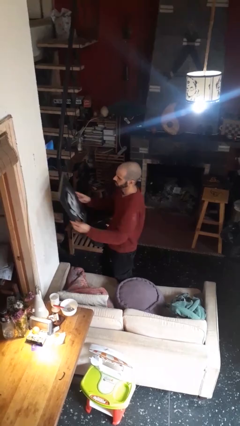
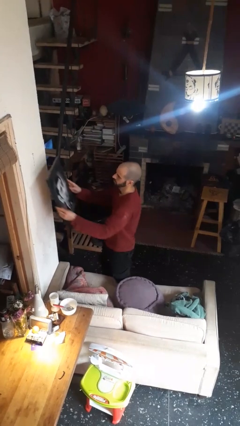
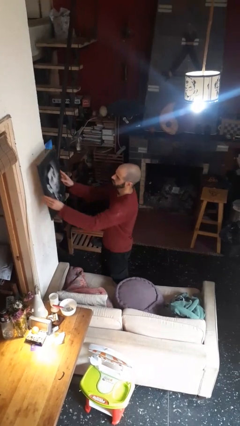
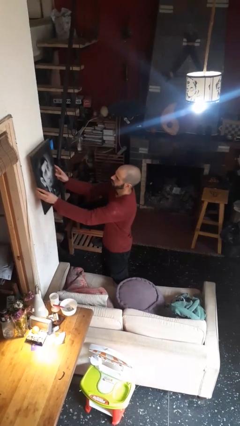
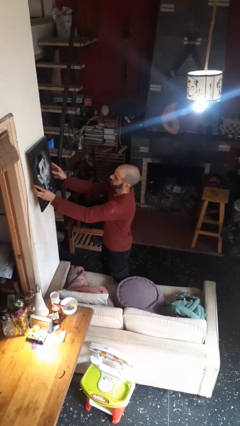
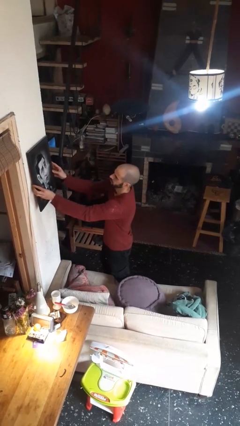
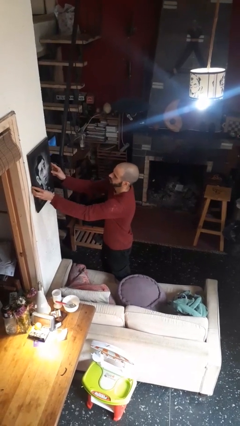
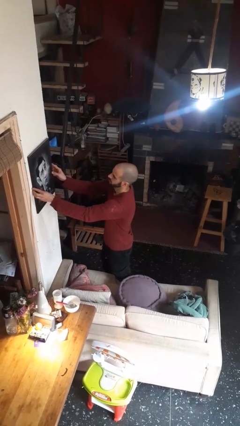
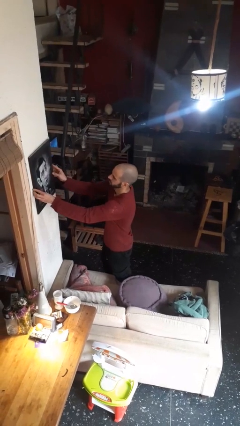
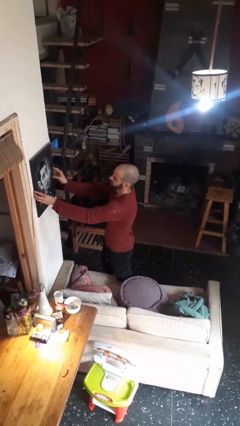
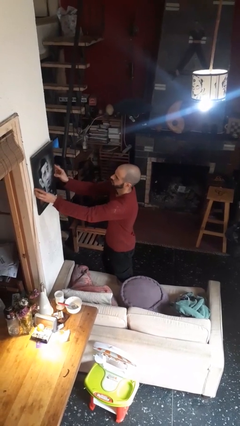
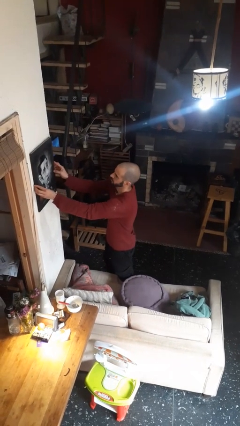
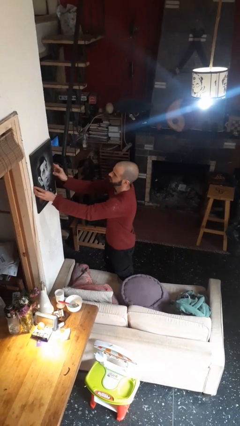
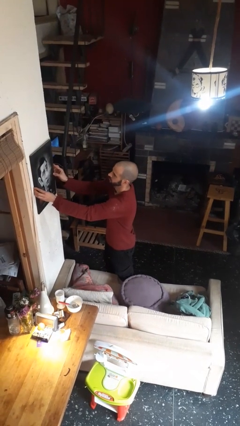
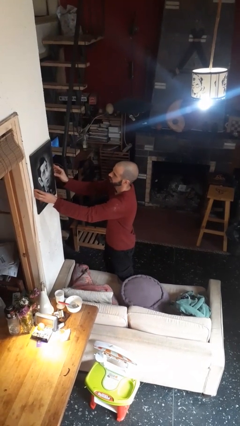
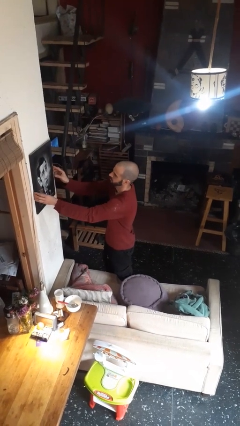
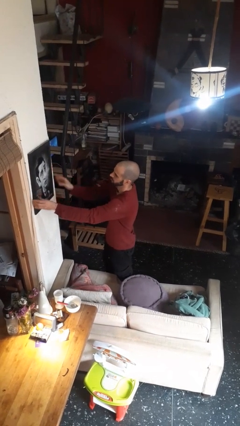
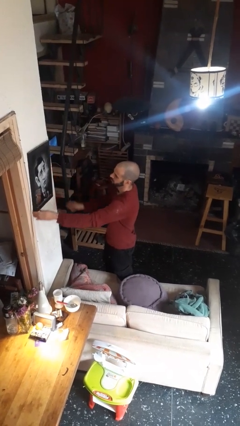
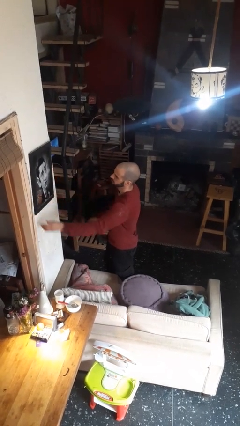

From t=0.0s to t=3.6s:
person puts up picture frame

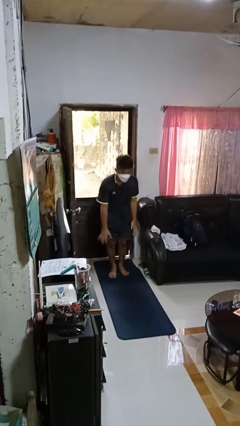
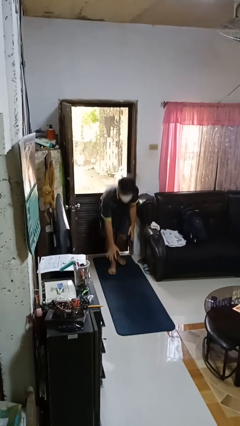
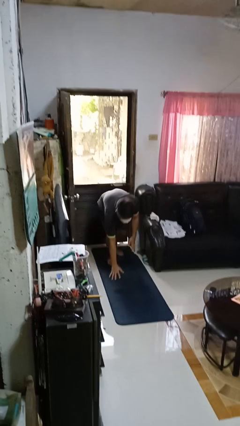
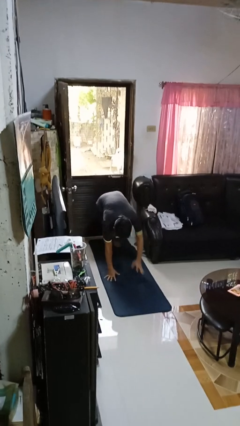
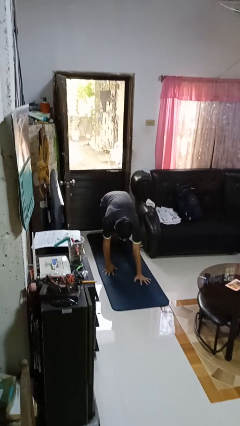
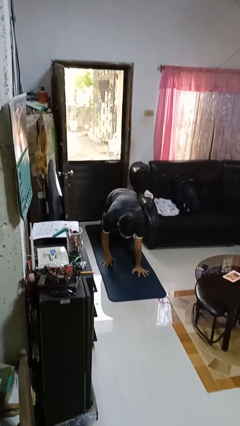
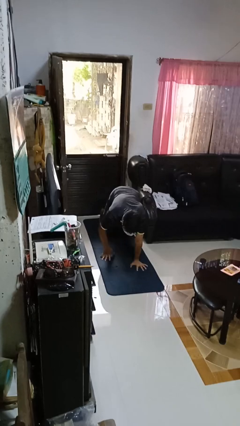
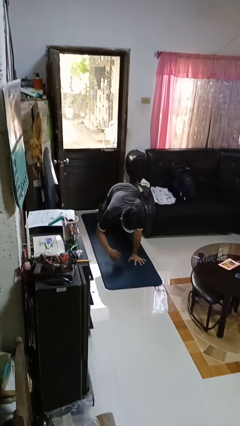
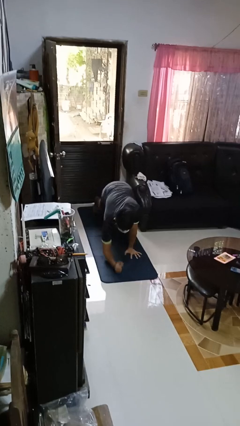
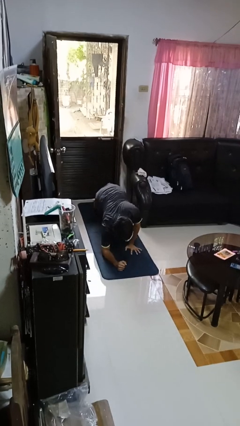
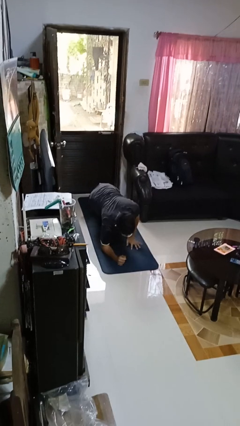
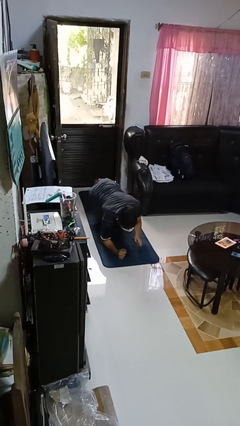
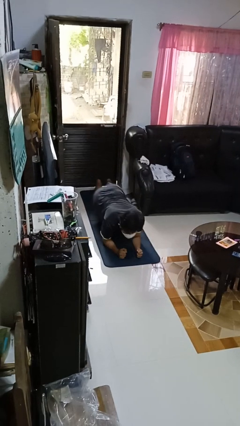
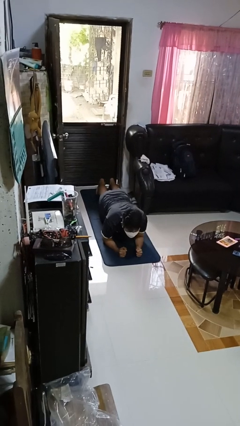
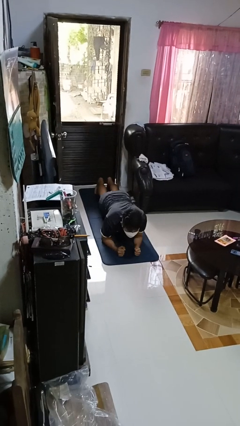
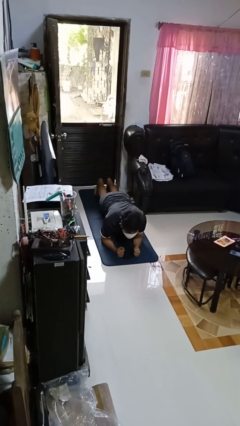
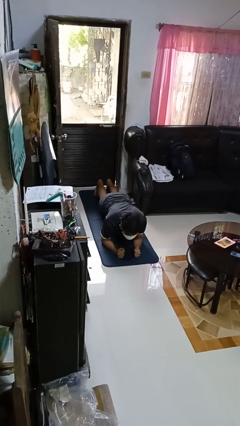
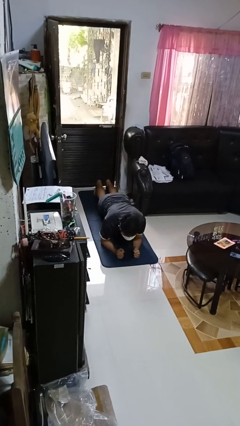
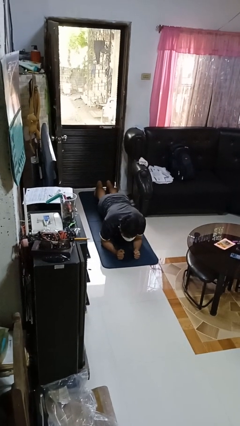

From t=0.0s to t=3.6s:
person exercises with plank

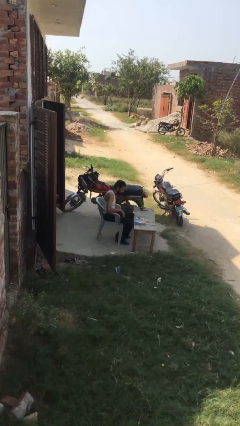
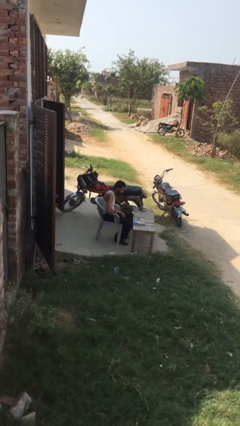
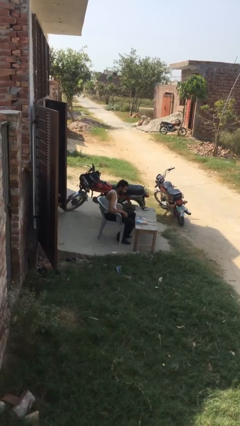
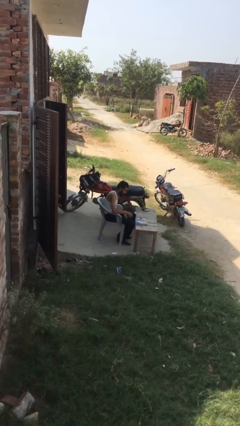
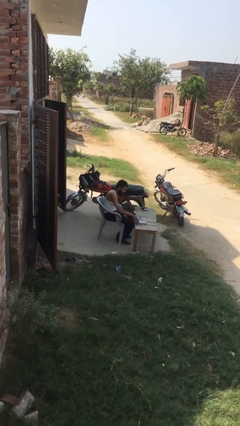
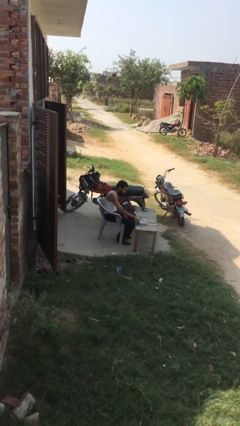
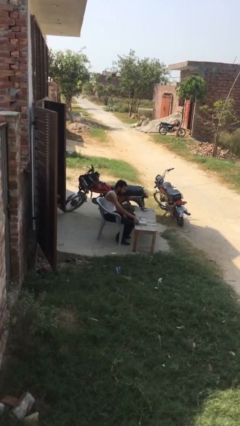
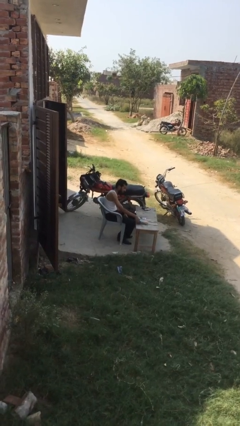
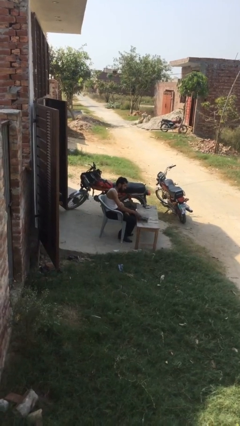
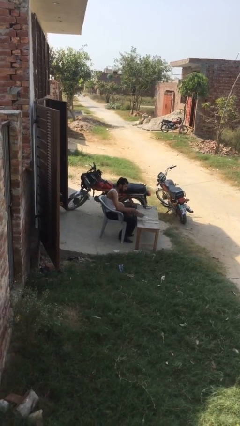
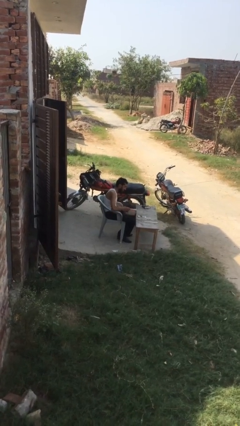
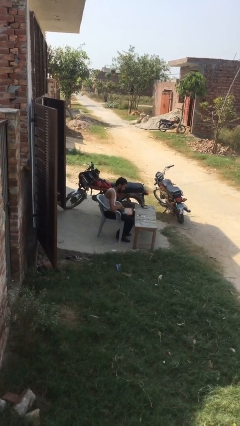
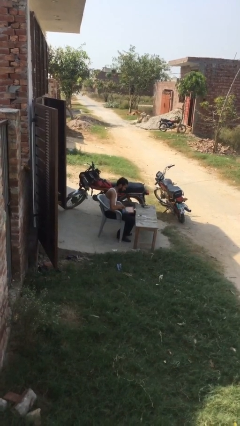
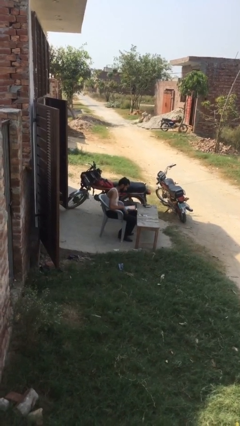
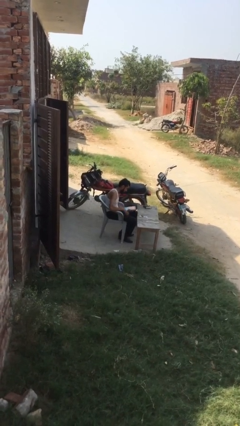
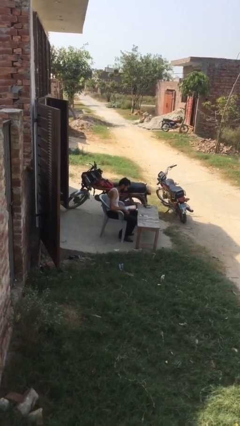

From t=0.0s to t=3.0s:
person picks up object from table

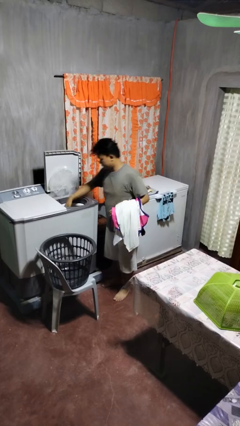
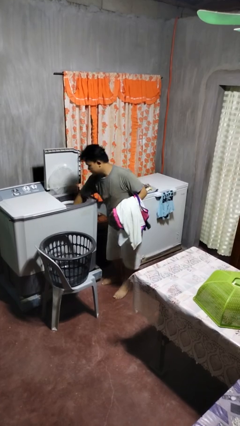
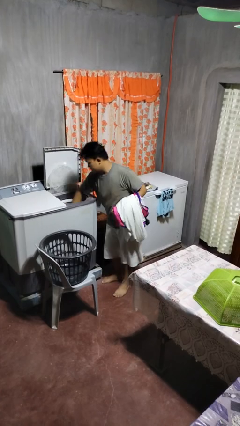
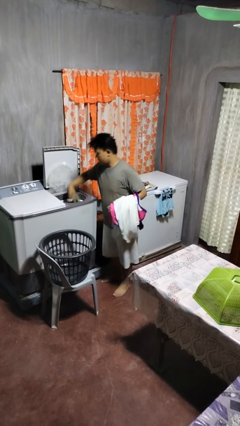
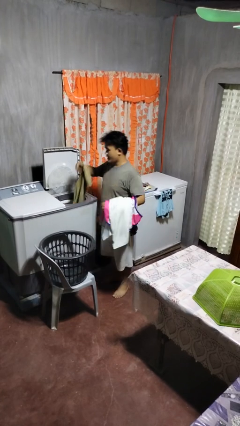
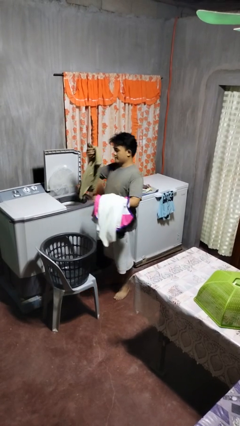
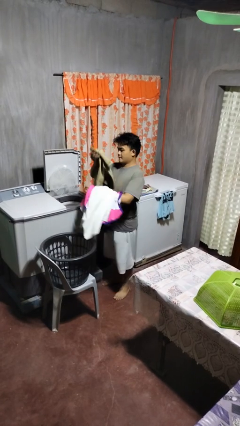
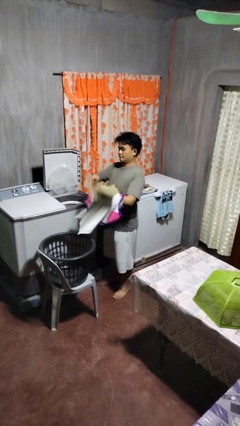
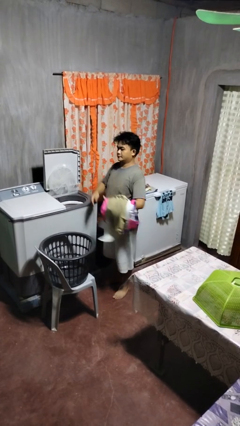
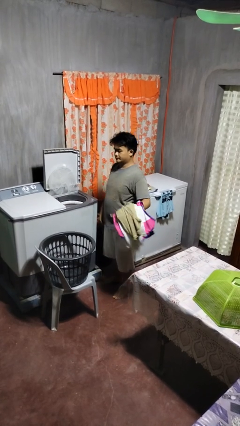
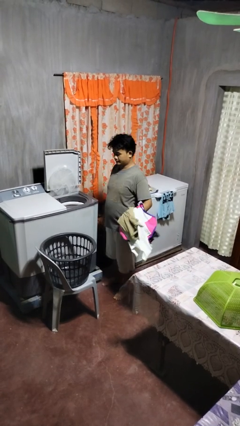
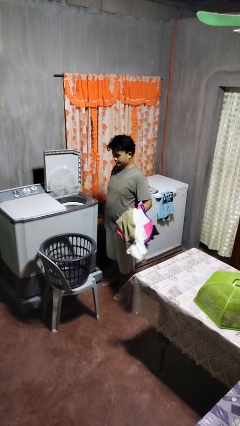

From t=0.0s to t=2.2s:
person unloads dryer

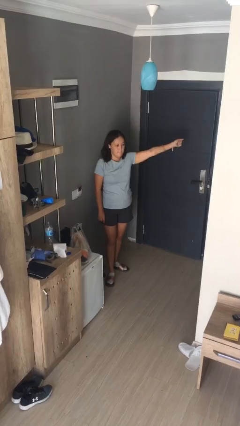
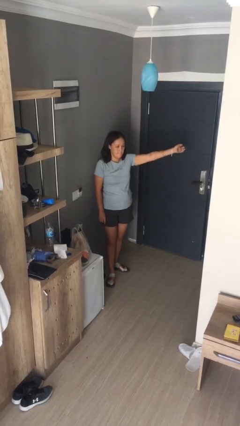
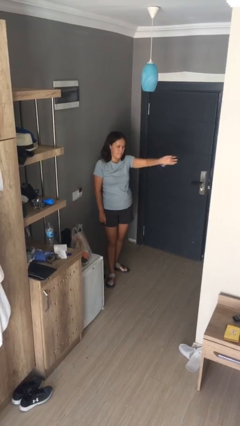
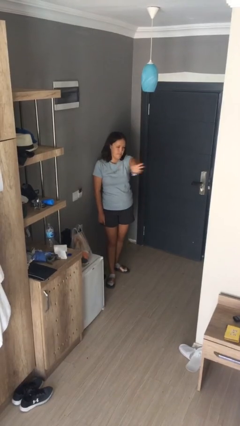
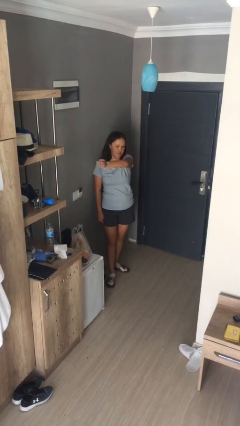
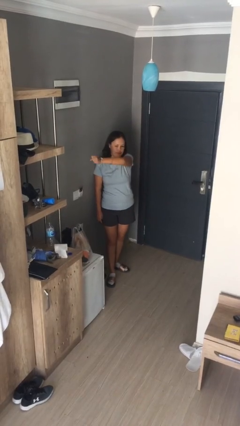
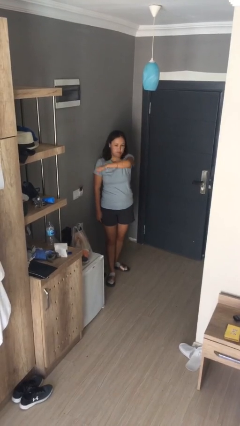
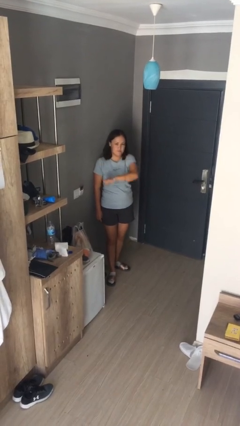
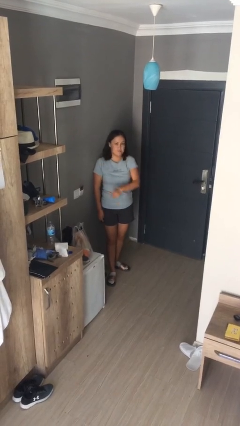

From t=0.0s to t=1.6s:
person gestures swipe right

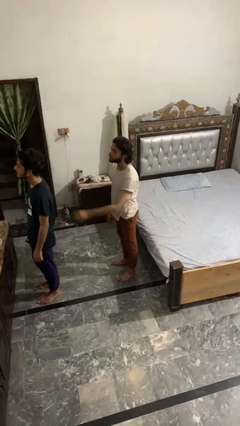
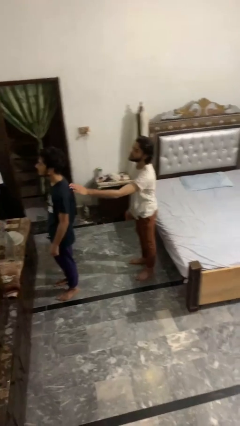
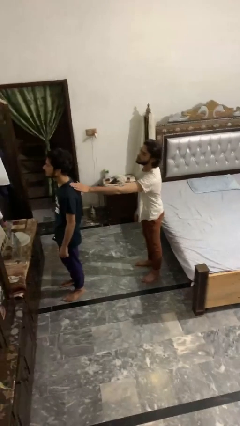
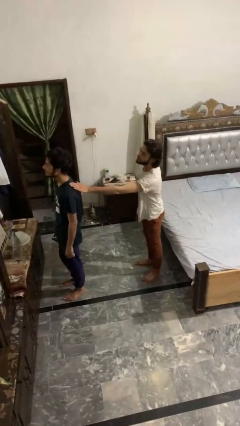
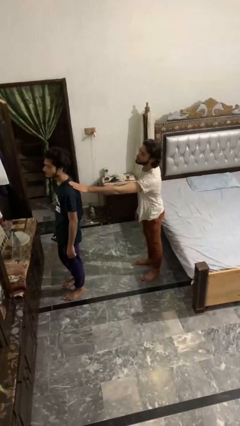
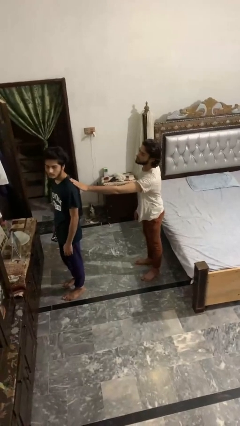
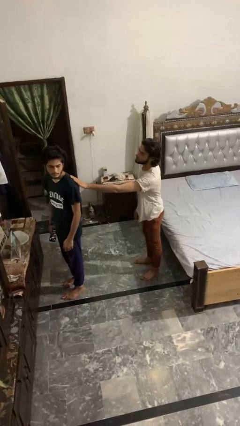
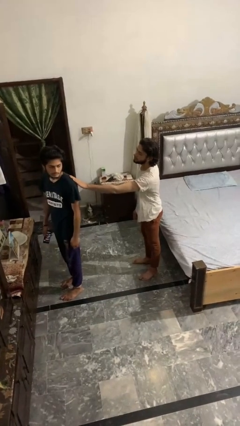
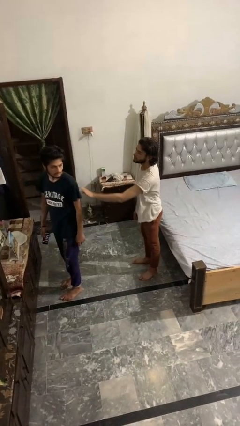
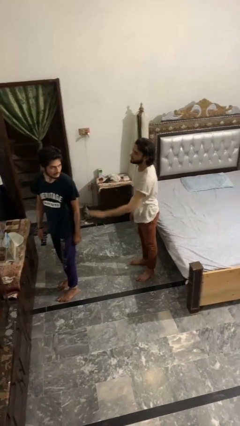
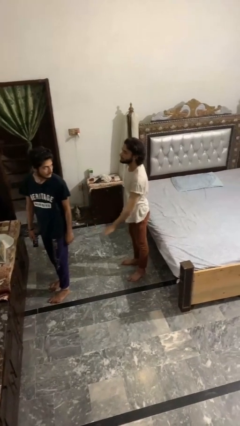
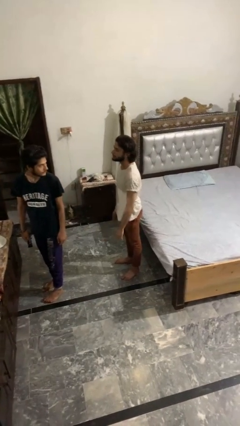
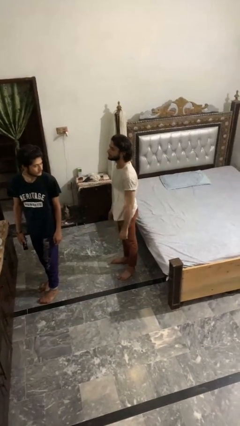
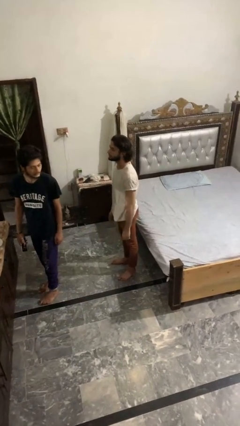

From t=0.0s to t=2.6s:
person touches back of person

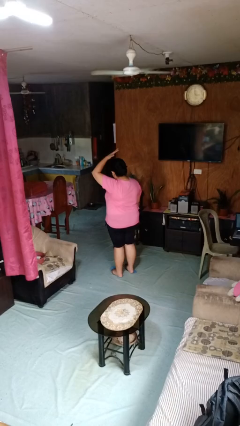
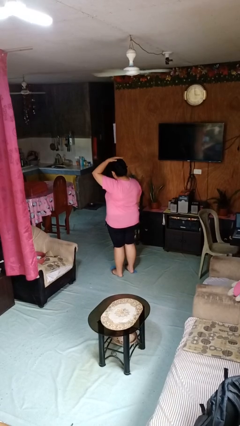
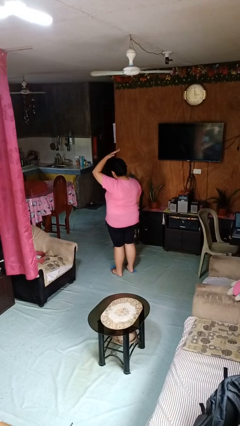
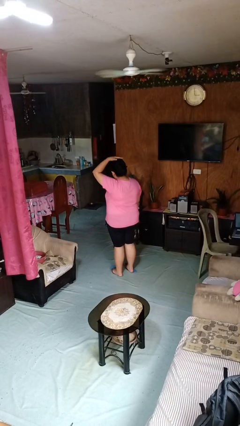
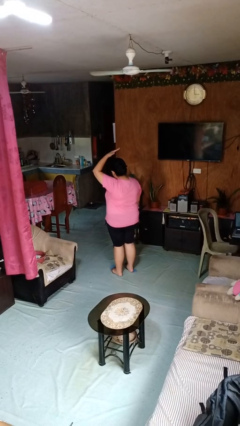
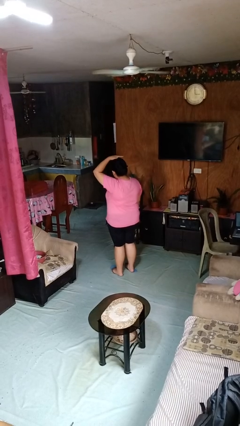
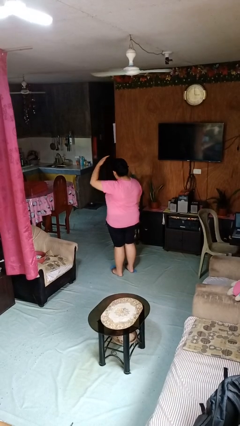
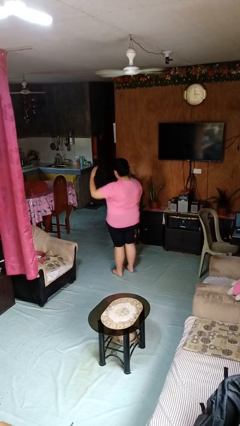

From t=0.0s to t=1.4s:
person pats head
